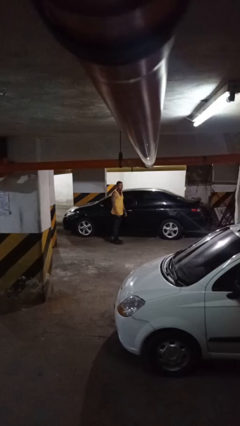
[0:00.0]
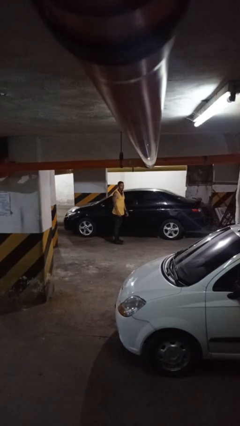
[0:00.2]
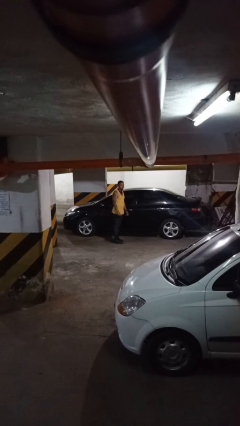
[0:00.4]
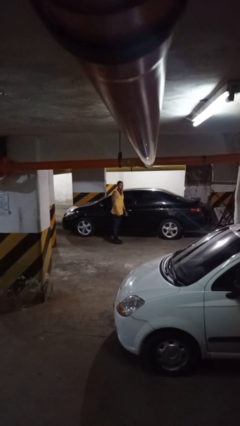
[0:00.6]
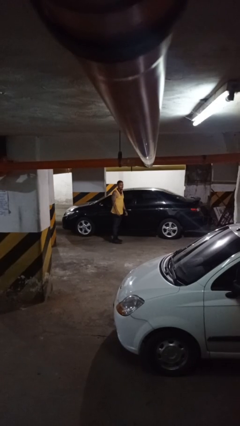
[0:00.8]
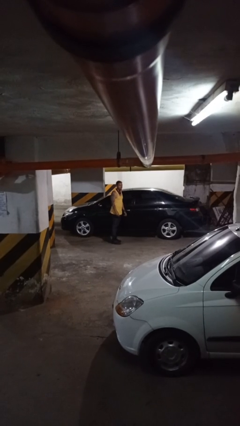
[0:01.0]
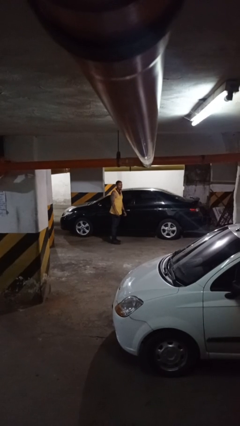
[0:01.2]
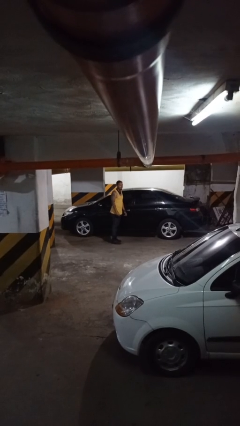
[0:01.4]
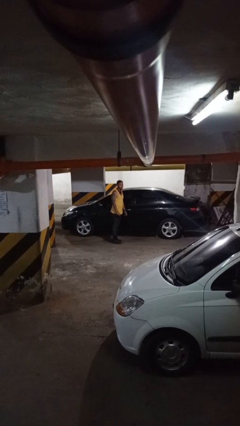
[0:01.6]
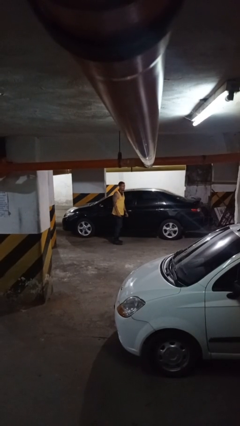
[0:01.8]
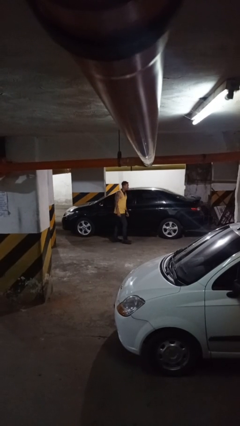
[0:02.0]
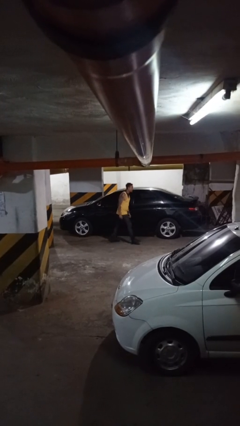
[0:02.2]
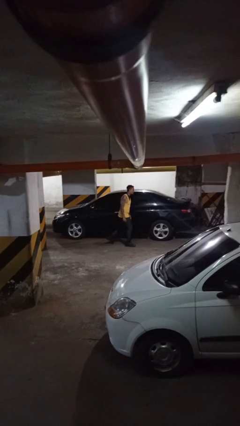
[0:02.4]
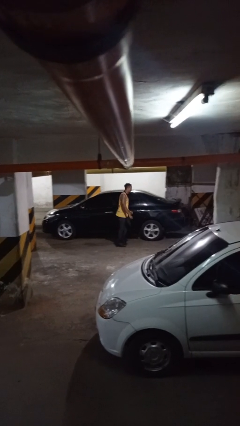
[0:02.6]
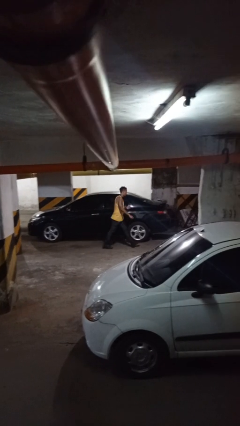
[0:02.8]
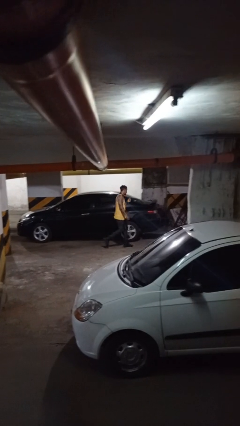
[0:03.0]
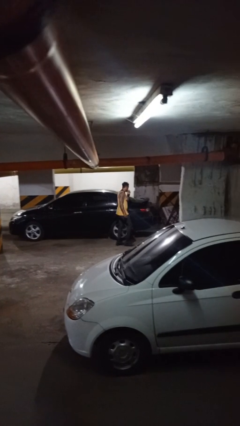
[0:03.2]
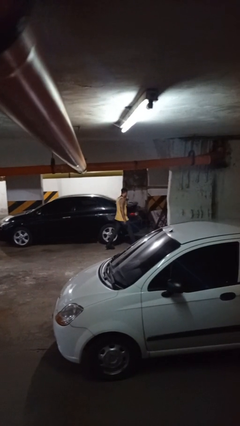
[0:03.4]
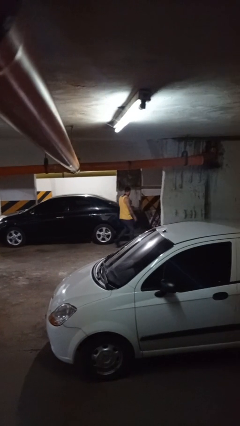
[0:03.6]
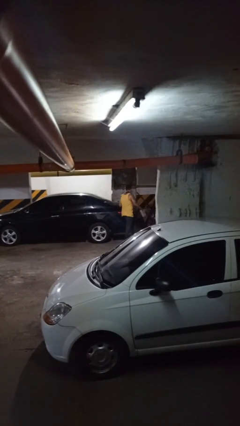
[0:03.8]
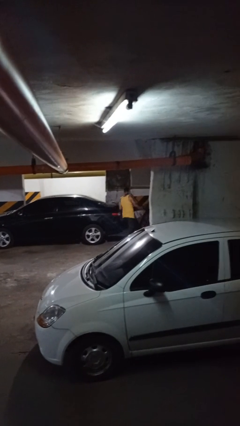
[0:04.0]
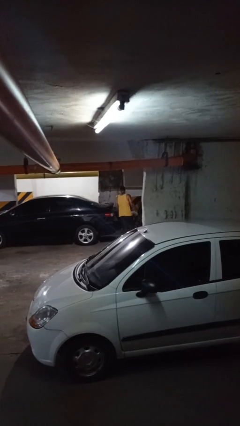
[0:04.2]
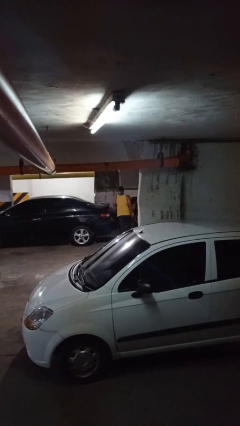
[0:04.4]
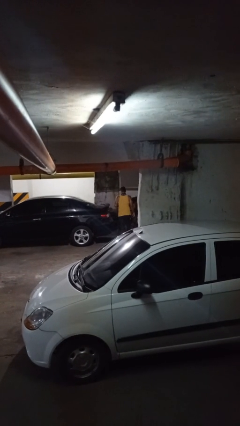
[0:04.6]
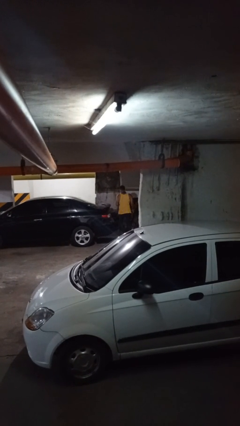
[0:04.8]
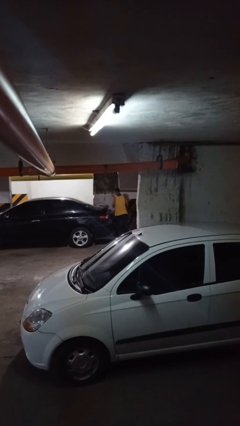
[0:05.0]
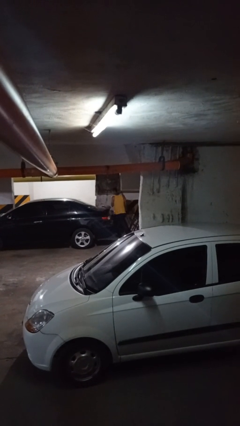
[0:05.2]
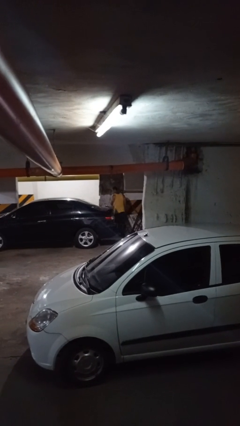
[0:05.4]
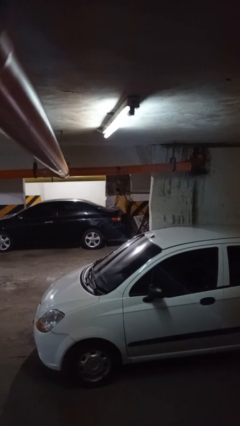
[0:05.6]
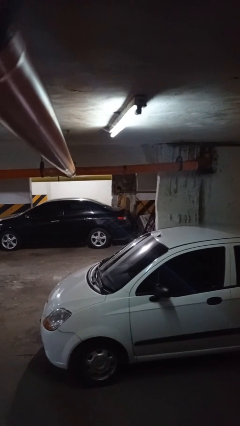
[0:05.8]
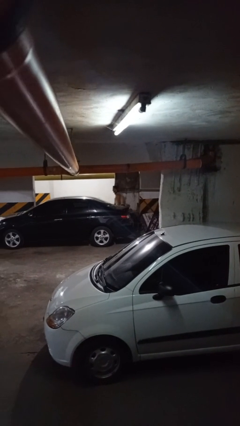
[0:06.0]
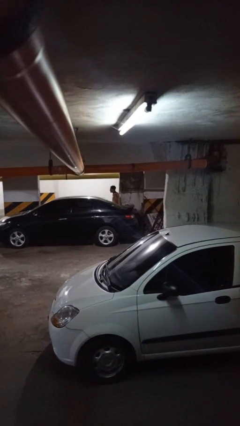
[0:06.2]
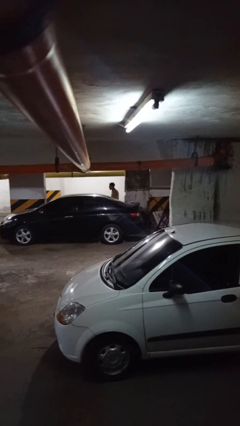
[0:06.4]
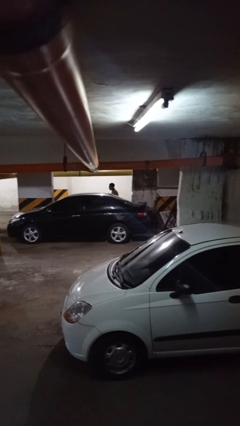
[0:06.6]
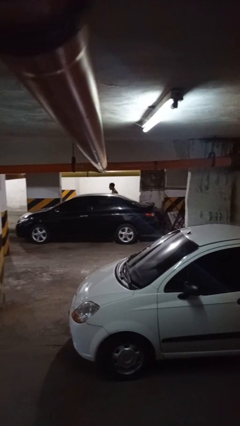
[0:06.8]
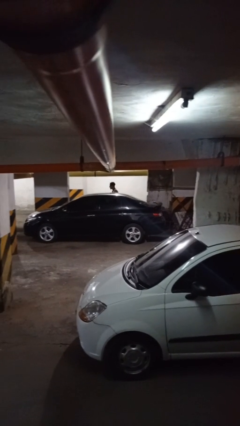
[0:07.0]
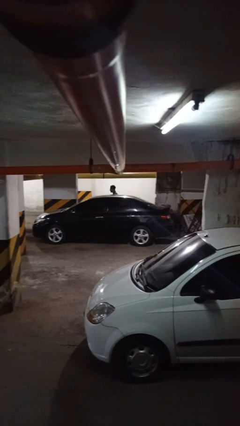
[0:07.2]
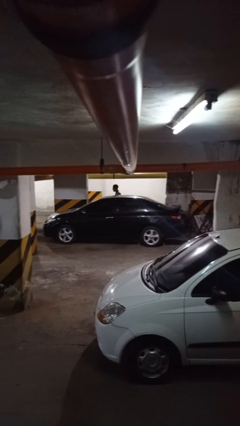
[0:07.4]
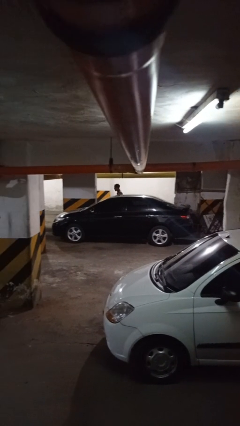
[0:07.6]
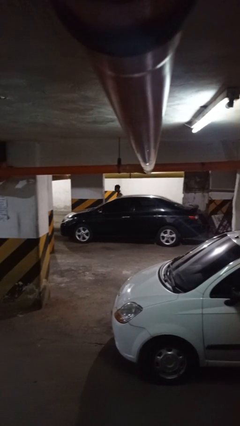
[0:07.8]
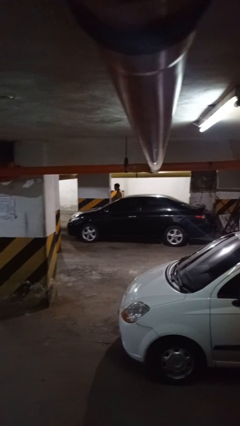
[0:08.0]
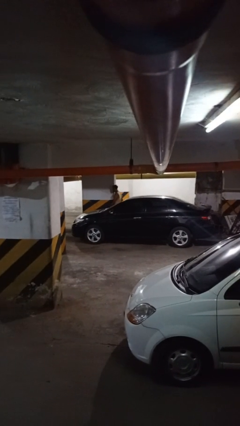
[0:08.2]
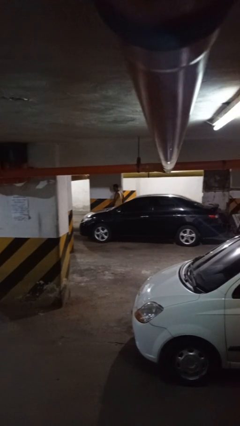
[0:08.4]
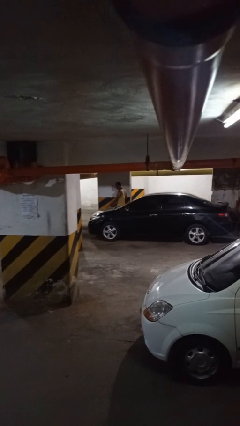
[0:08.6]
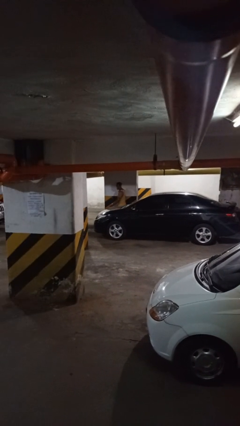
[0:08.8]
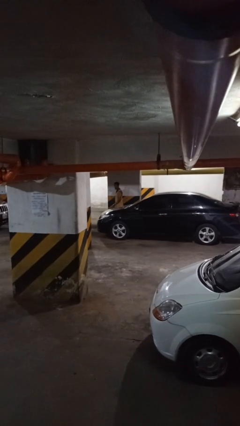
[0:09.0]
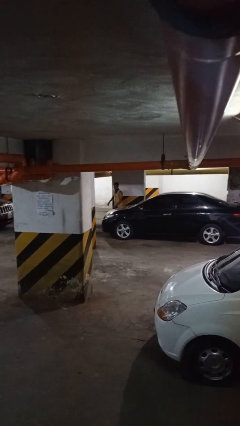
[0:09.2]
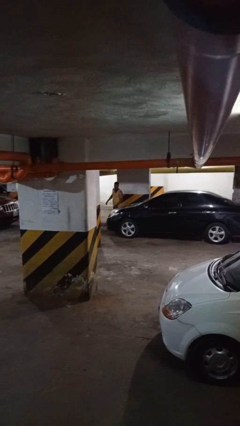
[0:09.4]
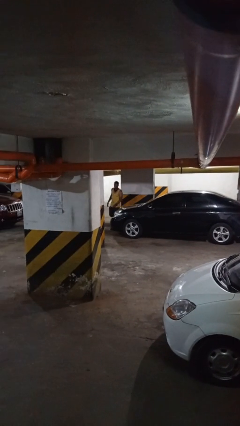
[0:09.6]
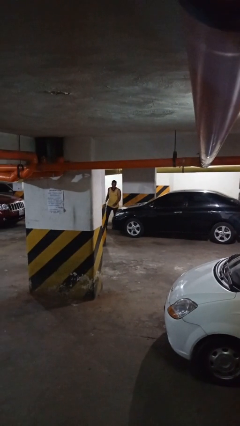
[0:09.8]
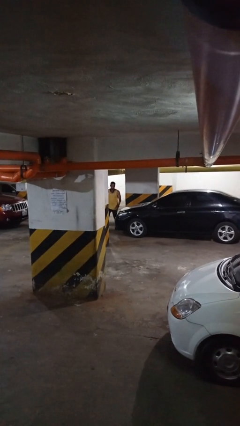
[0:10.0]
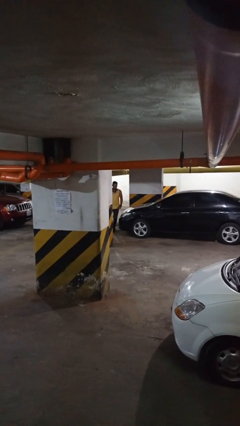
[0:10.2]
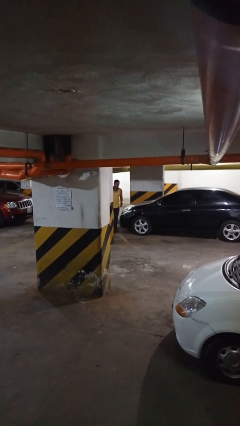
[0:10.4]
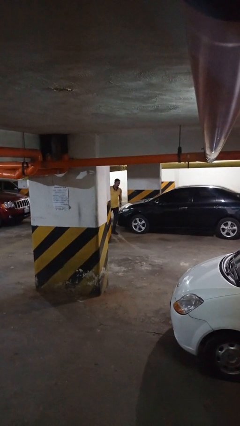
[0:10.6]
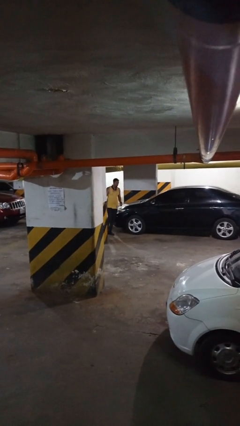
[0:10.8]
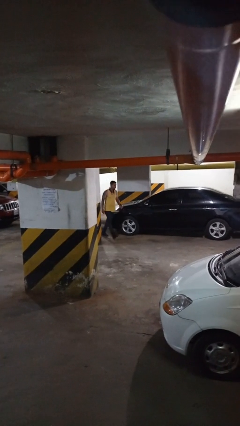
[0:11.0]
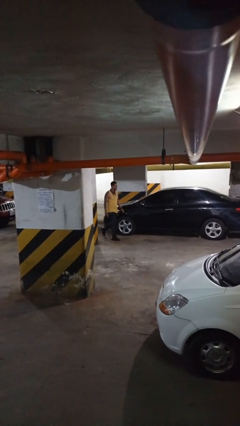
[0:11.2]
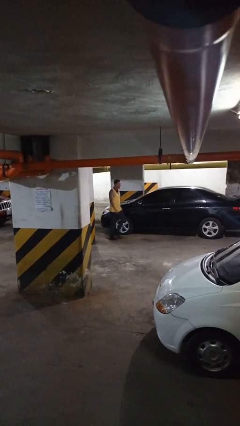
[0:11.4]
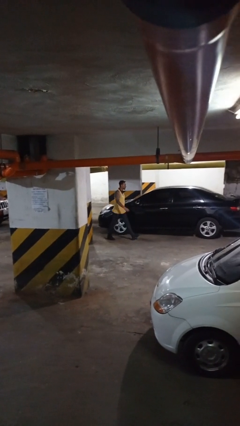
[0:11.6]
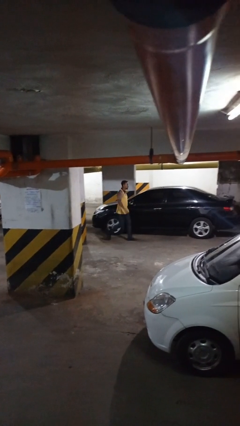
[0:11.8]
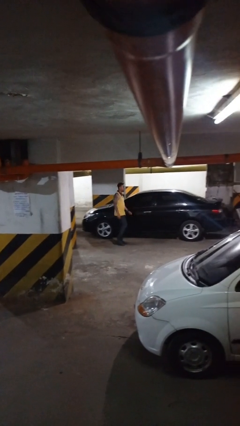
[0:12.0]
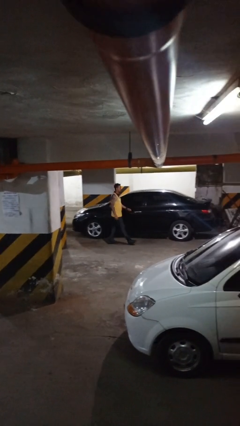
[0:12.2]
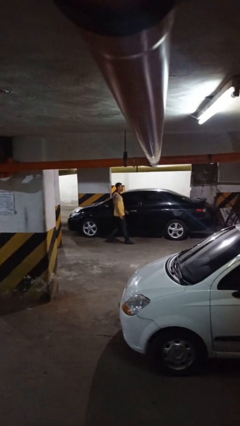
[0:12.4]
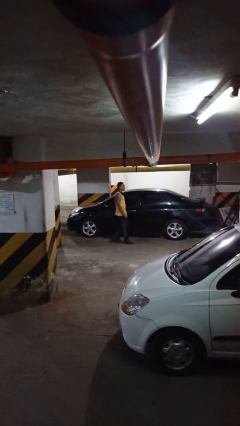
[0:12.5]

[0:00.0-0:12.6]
person walks around car

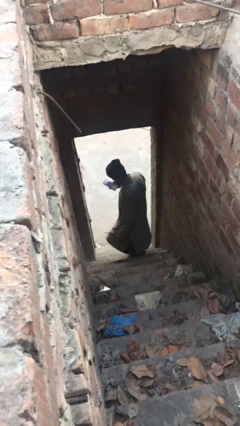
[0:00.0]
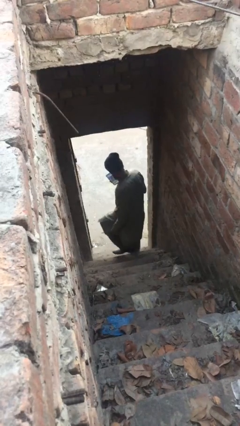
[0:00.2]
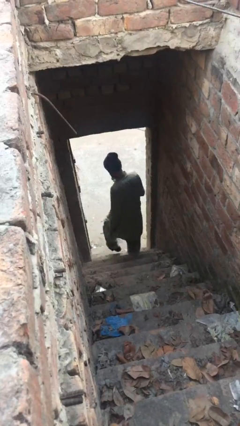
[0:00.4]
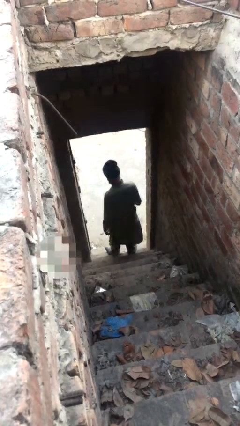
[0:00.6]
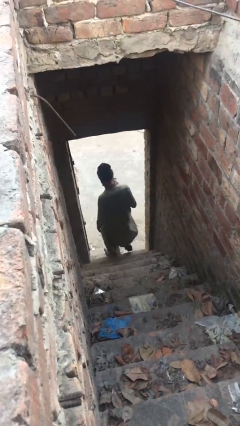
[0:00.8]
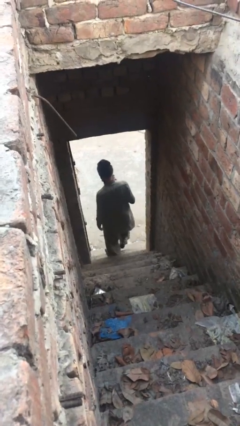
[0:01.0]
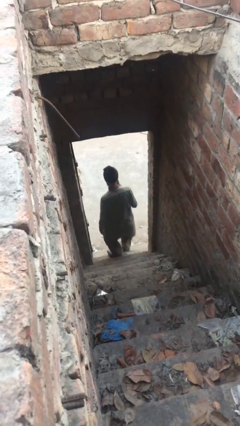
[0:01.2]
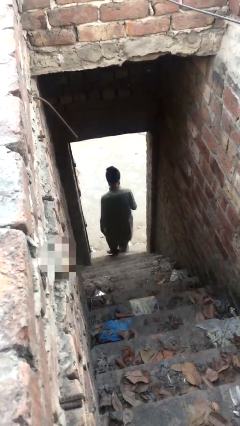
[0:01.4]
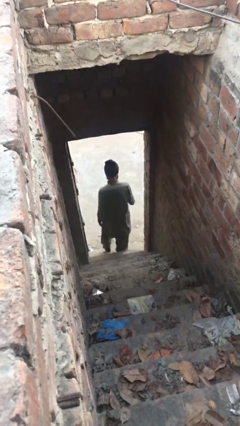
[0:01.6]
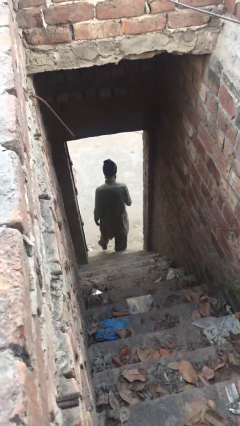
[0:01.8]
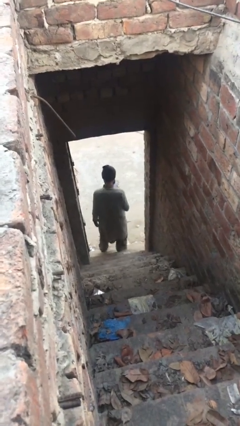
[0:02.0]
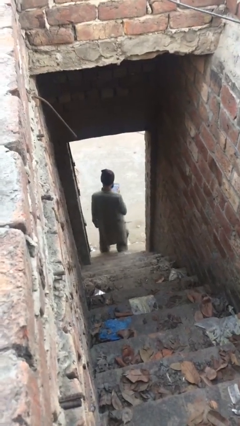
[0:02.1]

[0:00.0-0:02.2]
person exits scene through structure

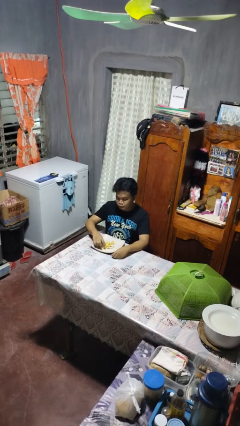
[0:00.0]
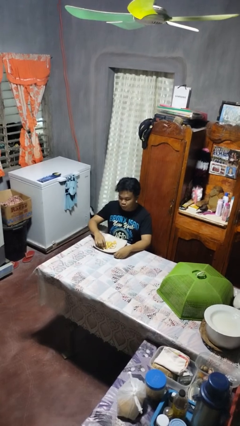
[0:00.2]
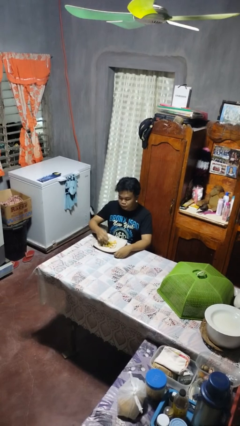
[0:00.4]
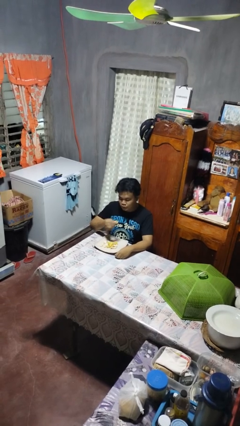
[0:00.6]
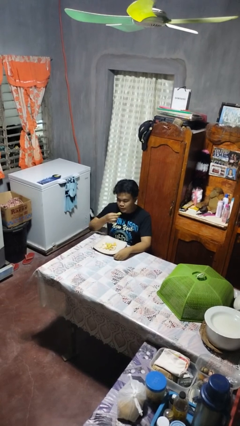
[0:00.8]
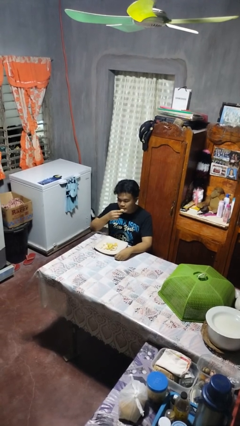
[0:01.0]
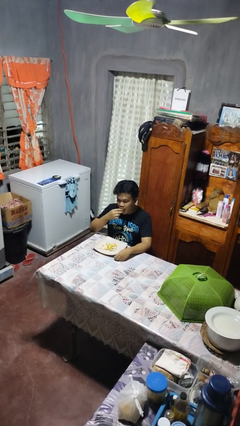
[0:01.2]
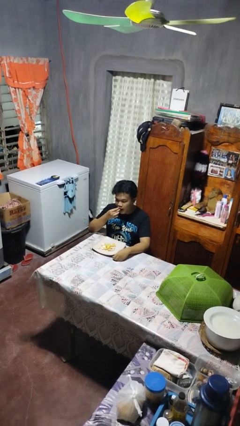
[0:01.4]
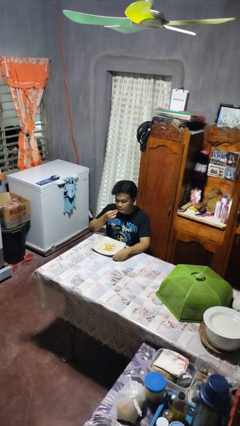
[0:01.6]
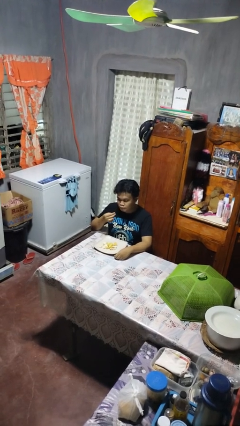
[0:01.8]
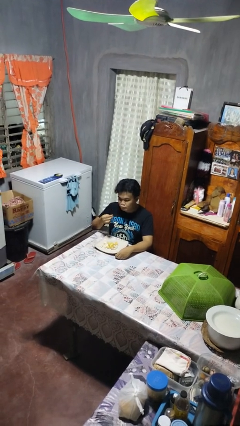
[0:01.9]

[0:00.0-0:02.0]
person eats with hands

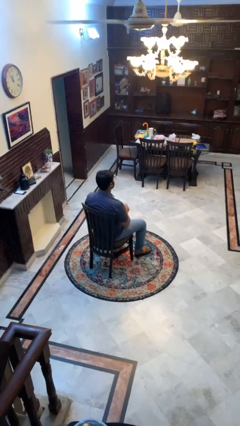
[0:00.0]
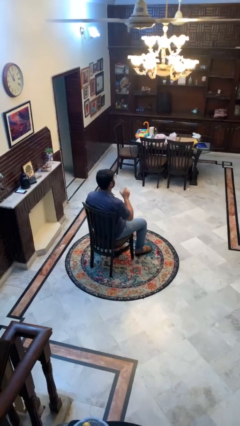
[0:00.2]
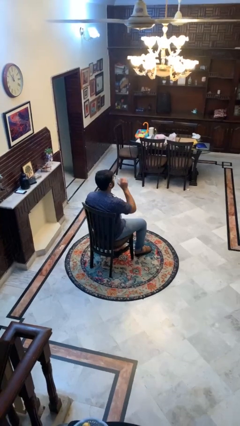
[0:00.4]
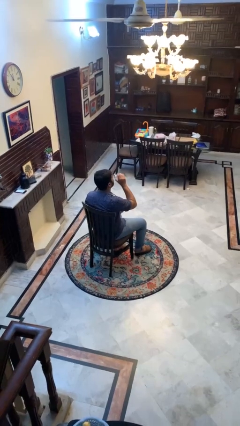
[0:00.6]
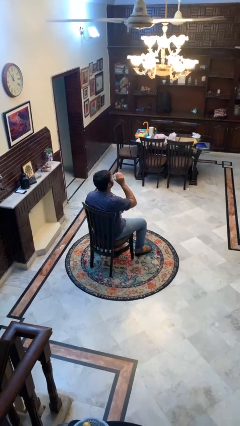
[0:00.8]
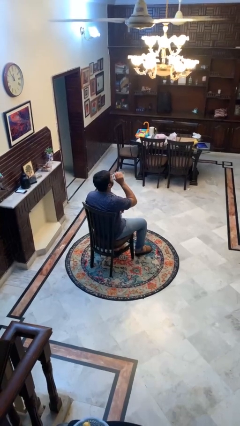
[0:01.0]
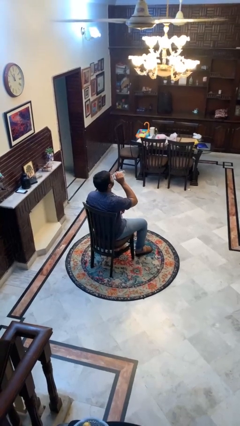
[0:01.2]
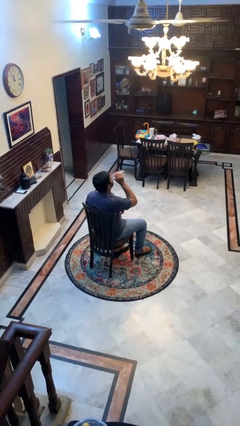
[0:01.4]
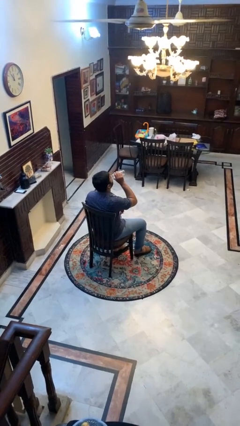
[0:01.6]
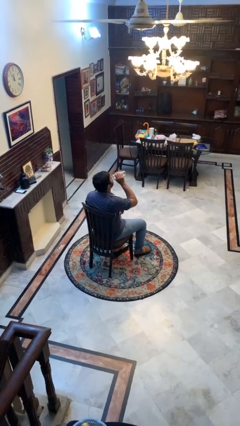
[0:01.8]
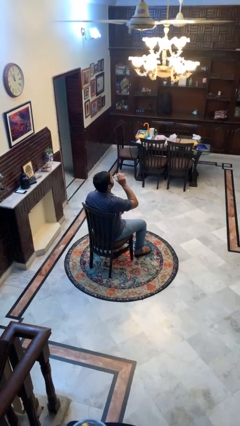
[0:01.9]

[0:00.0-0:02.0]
person drinks from bottle
